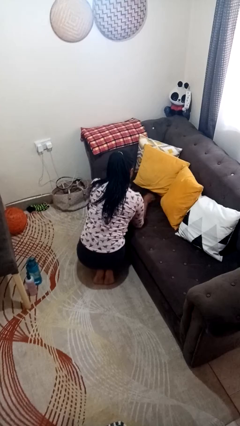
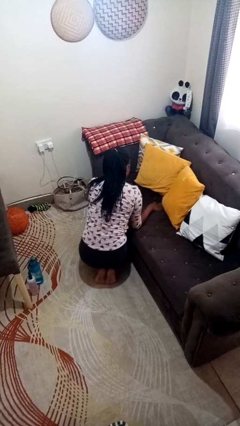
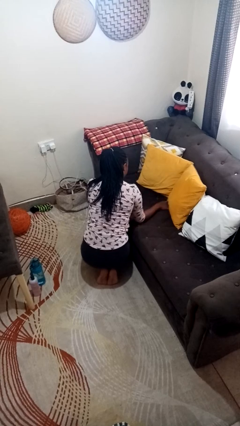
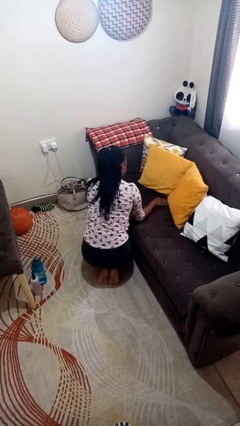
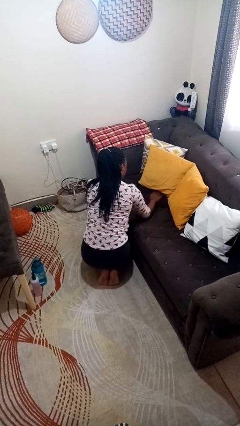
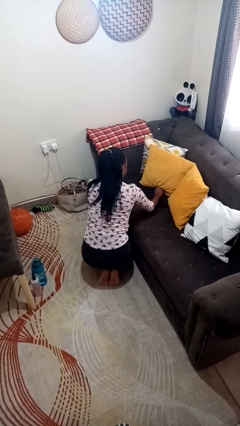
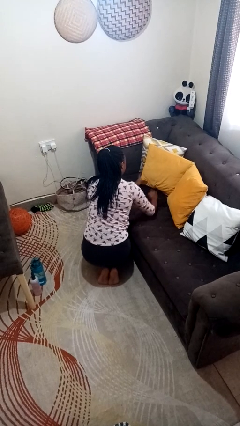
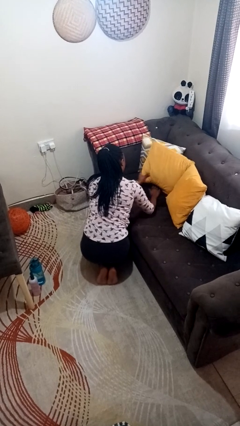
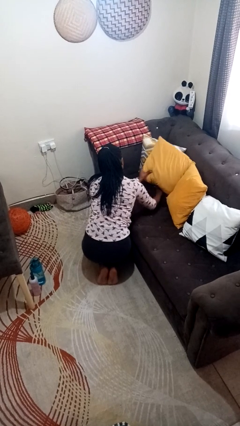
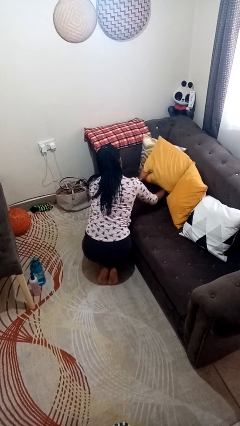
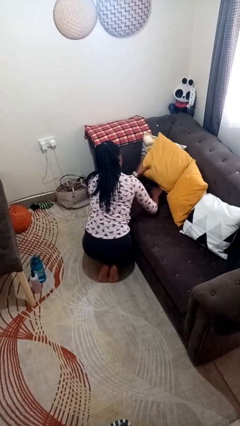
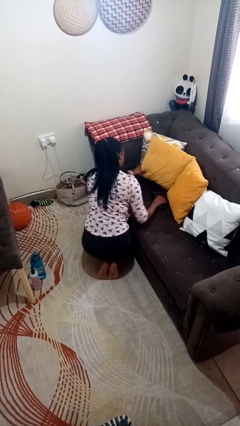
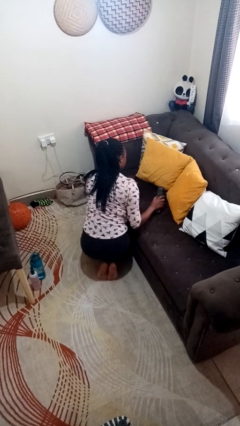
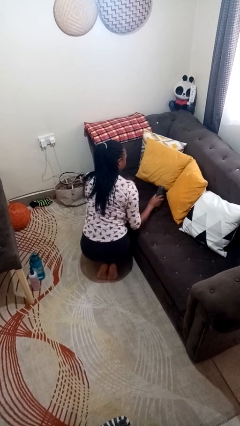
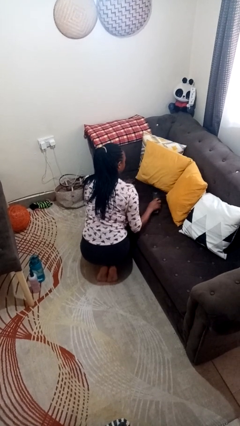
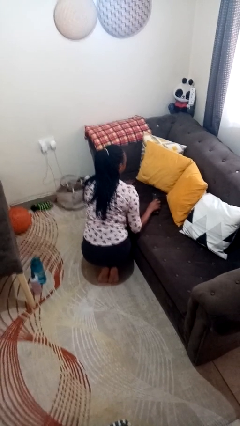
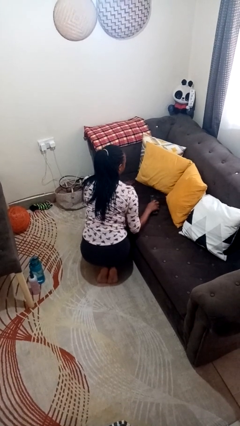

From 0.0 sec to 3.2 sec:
person searches in couch

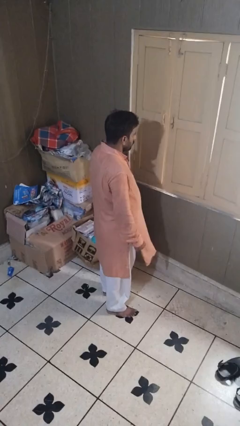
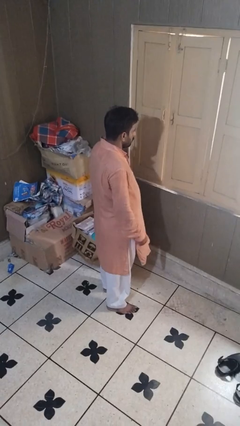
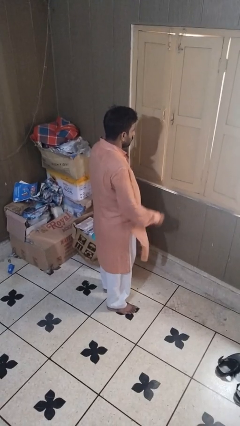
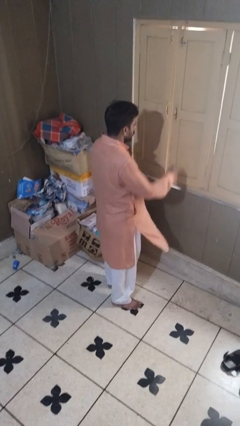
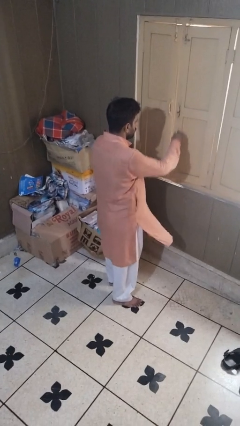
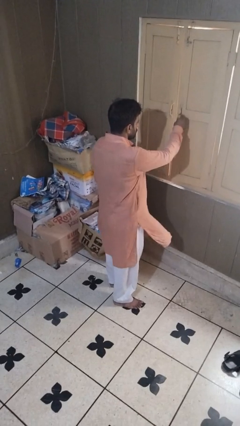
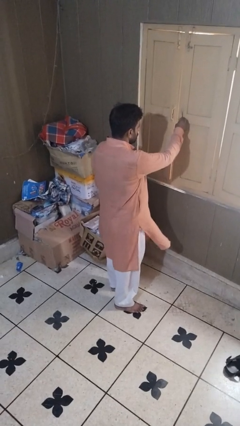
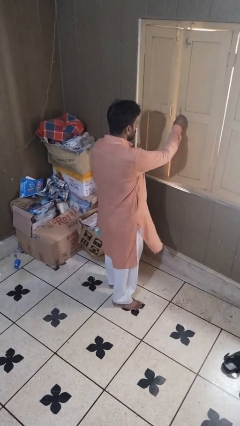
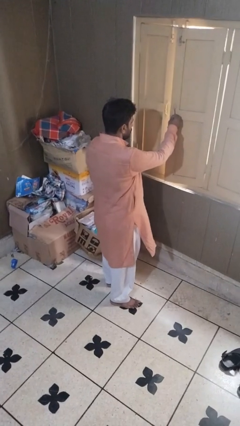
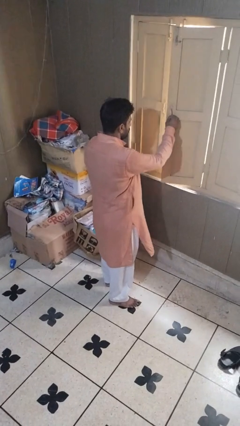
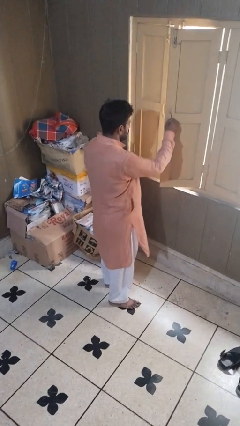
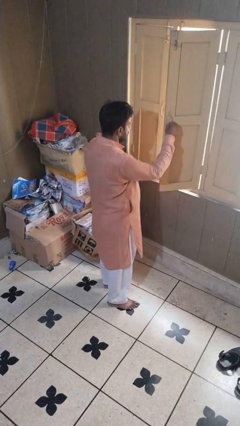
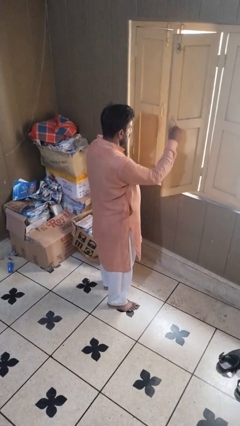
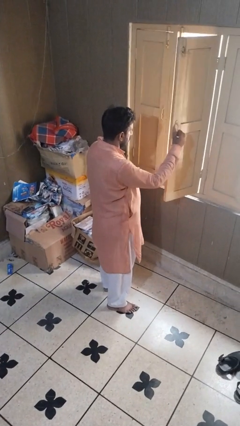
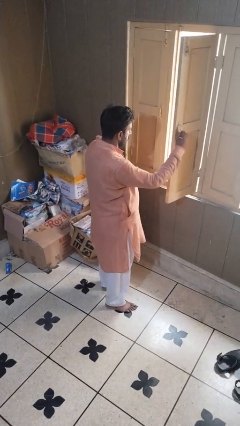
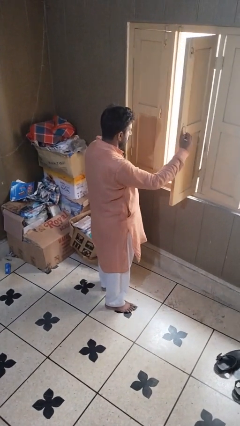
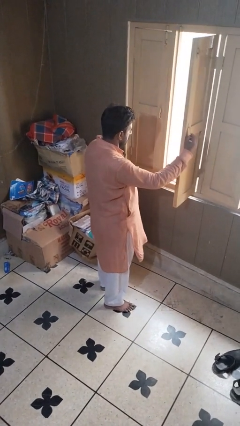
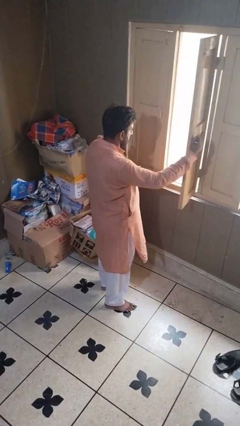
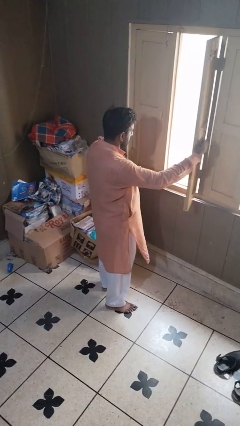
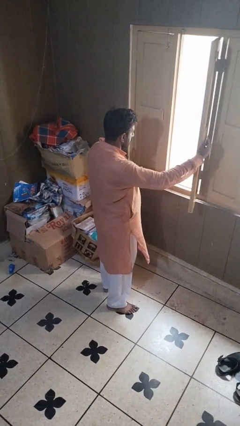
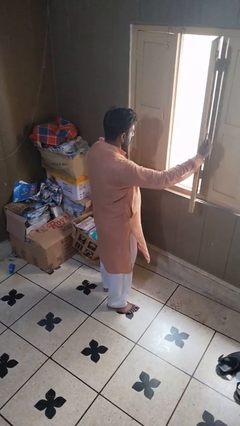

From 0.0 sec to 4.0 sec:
person opens home window

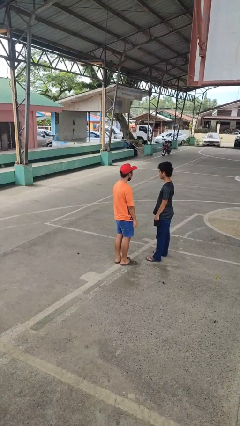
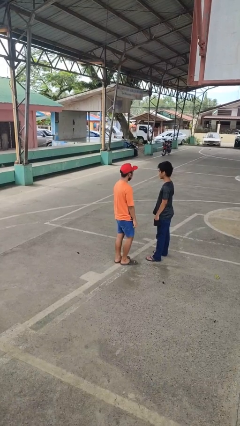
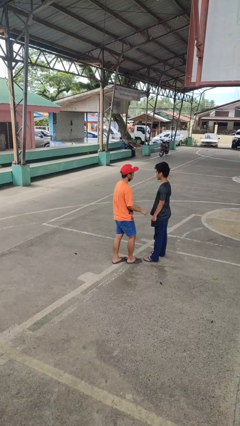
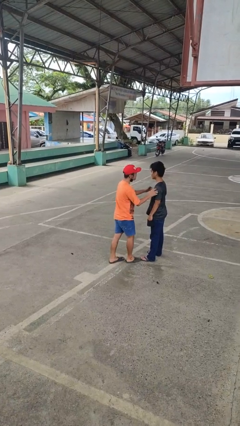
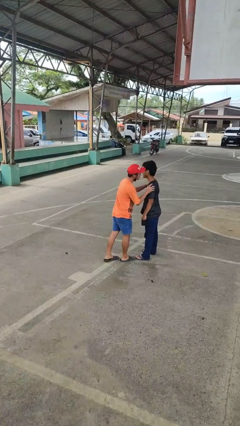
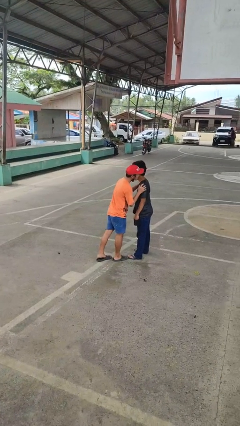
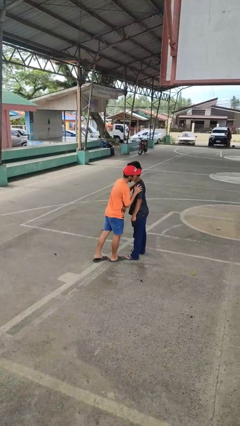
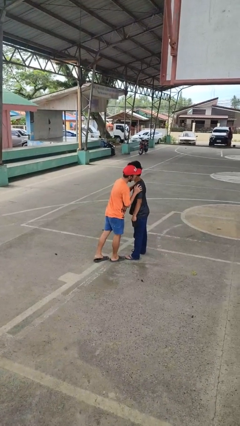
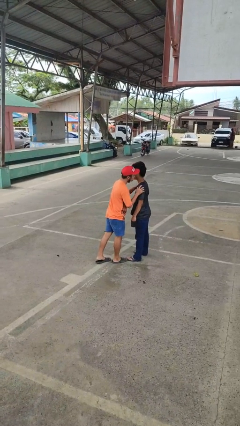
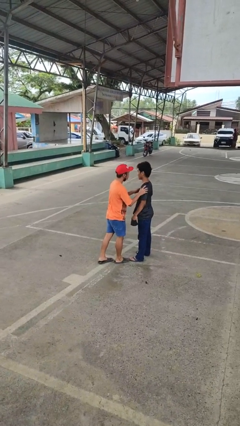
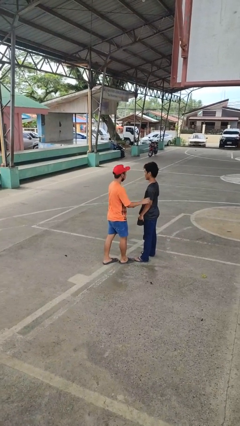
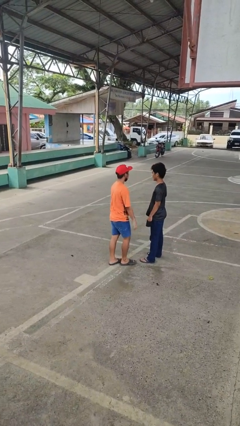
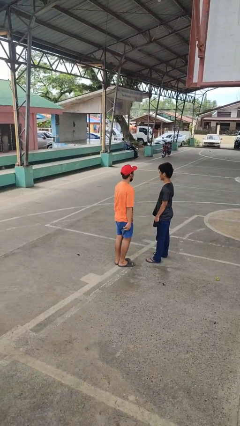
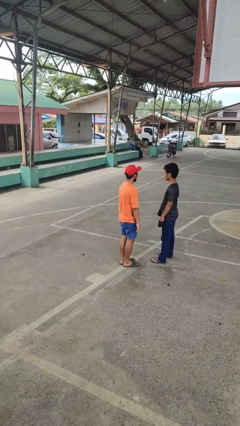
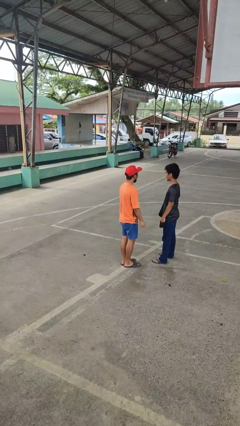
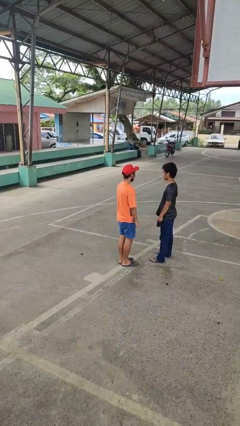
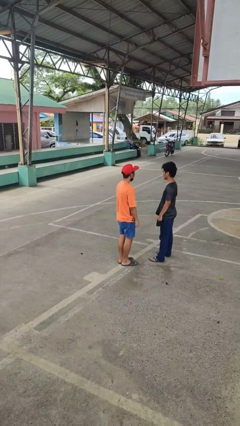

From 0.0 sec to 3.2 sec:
person kisses cheek of person

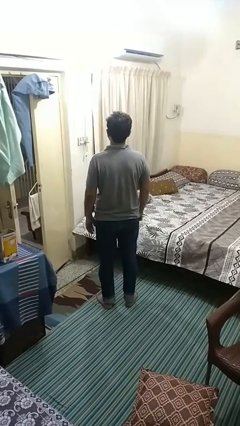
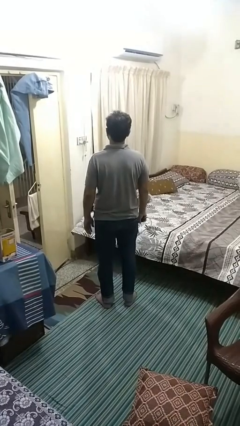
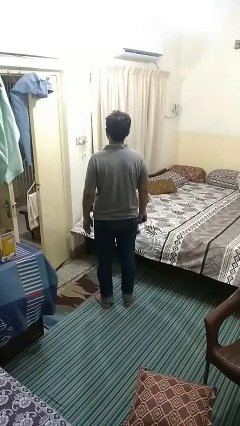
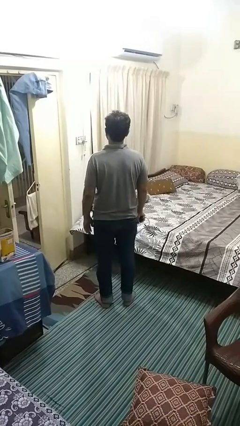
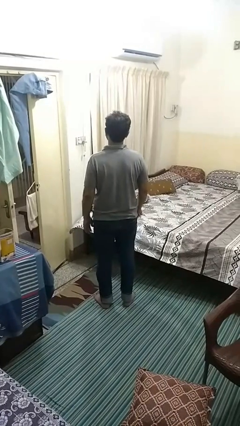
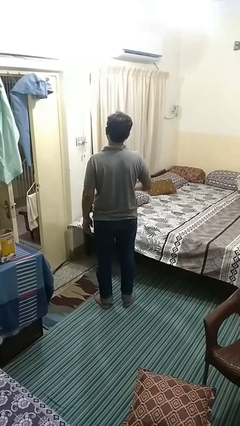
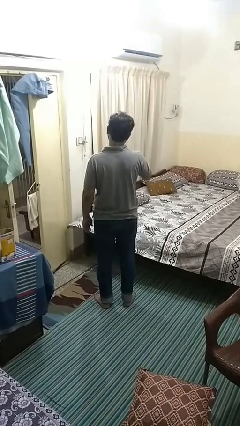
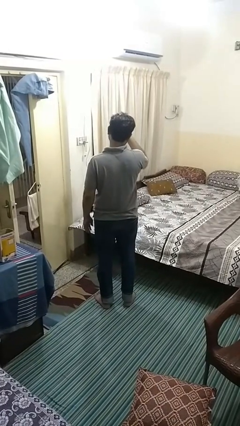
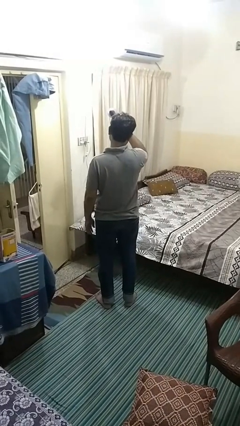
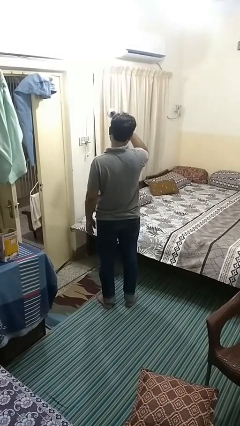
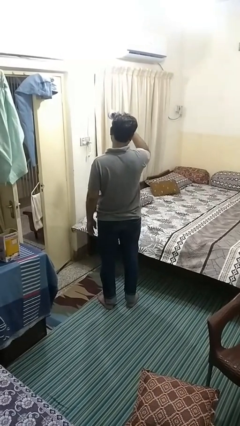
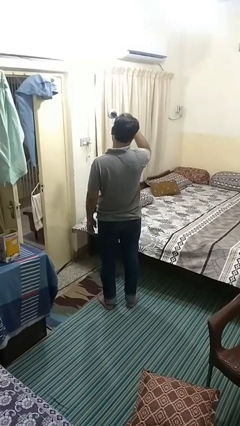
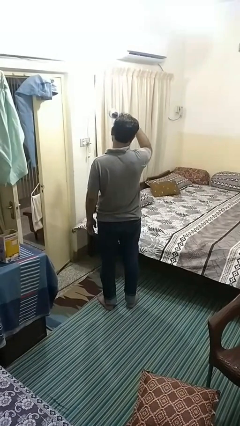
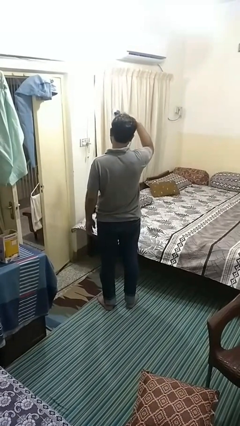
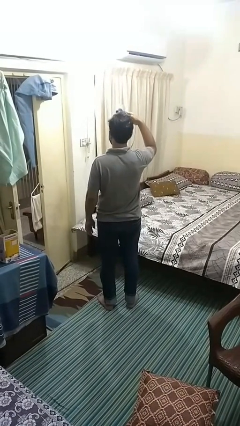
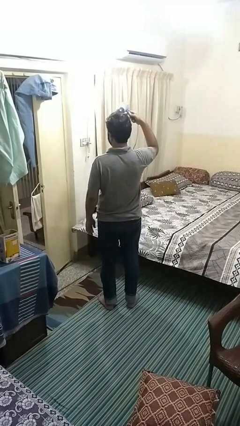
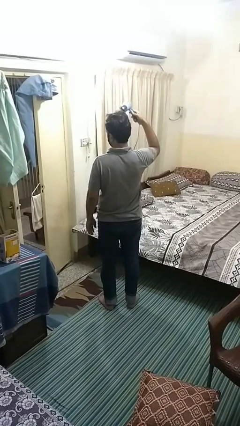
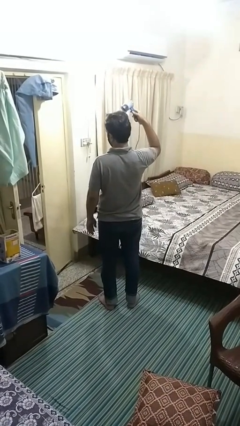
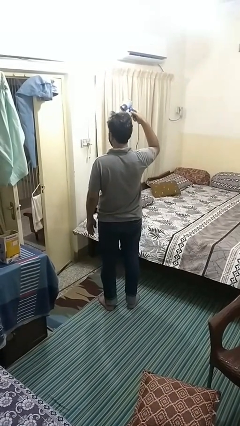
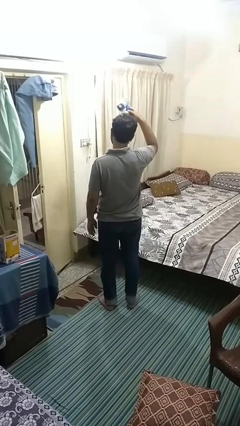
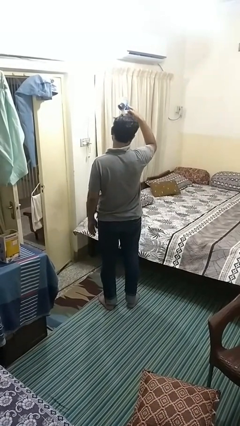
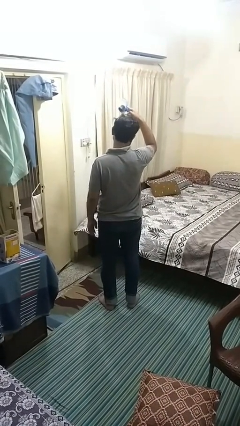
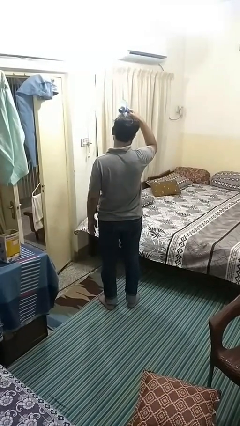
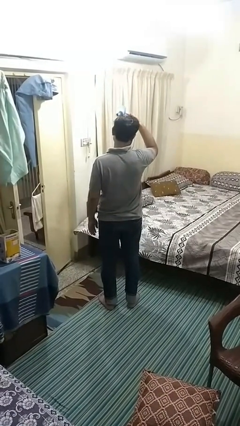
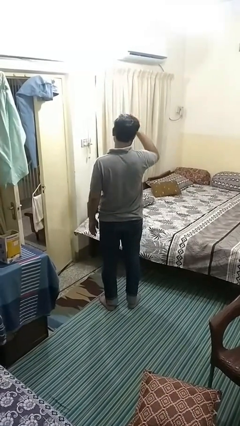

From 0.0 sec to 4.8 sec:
person dries hair with hairdryer

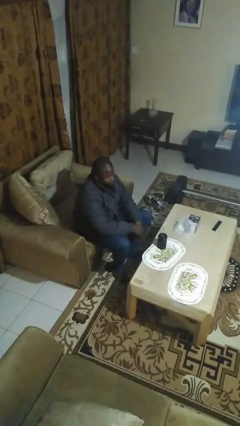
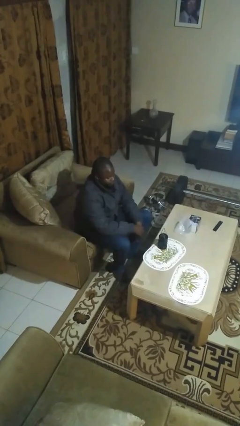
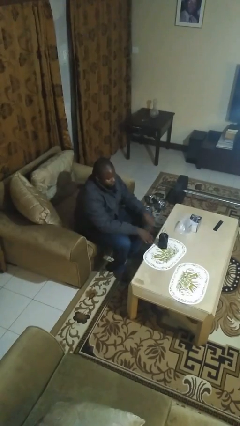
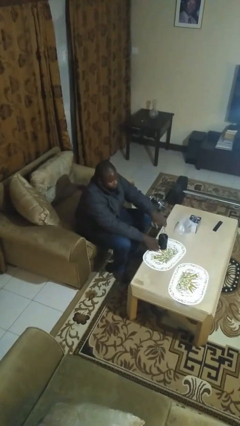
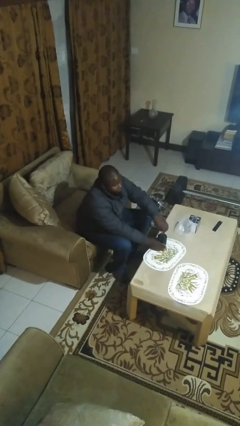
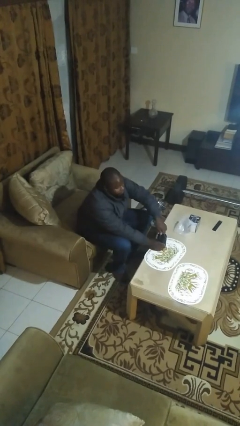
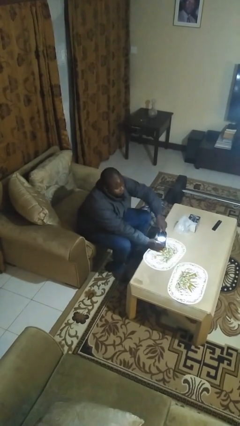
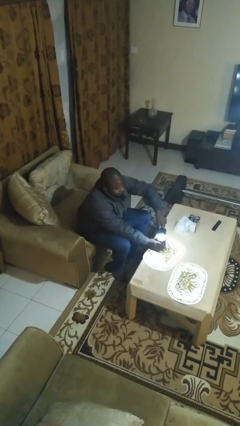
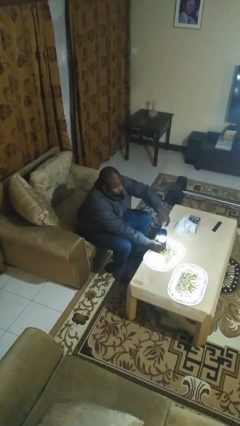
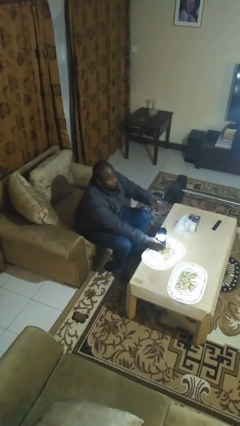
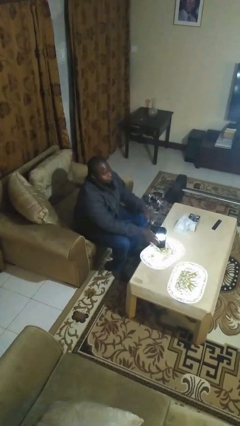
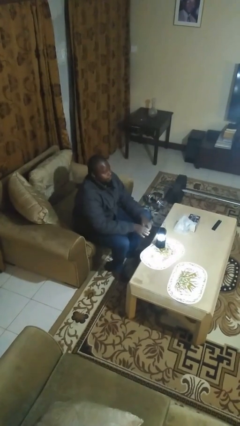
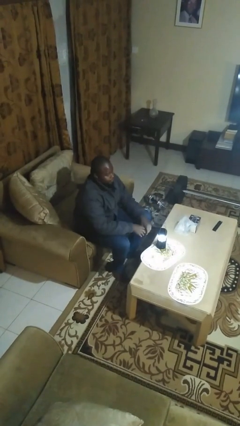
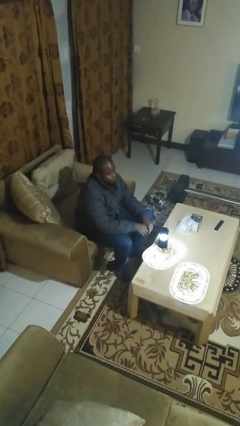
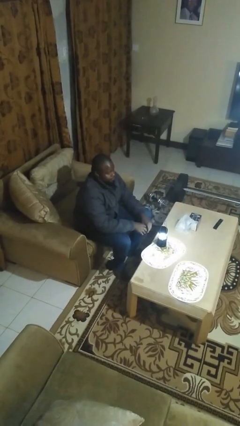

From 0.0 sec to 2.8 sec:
person turns on lamp
